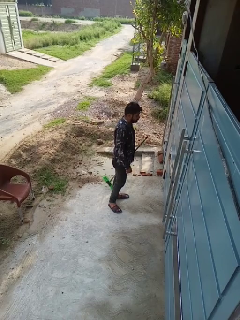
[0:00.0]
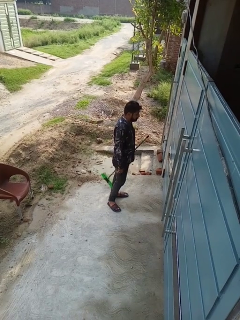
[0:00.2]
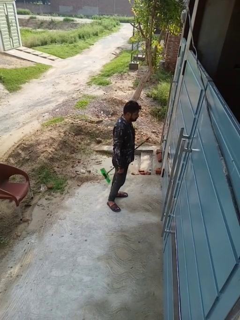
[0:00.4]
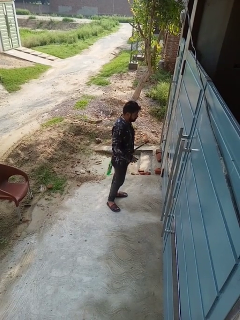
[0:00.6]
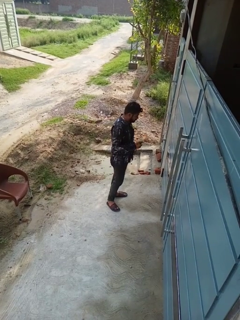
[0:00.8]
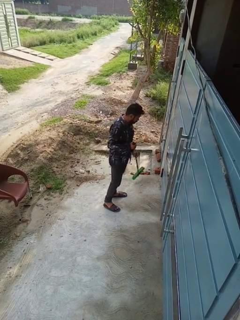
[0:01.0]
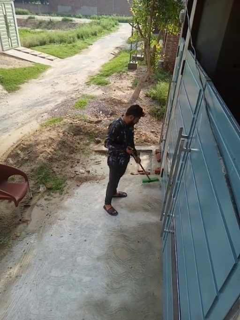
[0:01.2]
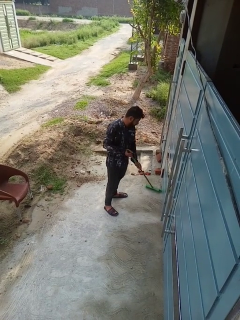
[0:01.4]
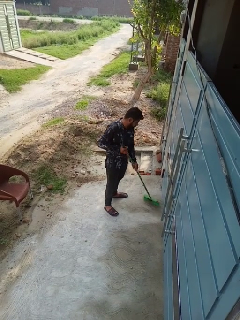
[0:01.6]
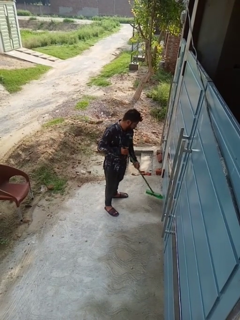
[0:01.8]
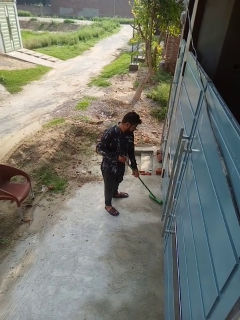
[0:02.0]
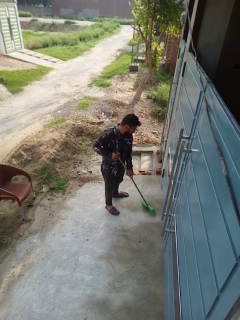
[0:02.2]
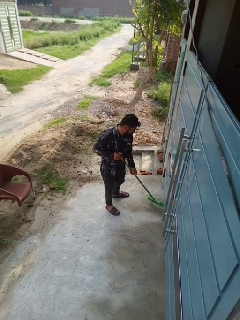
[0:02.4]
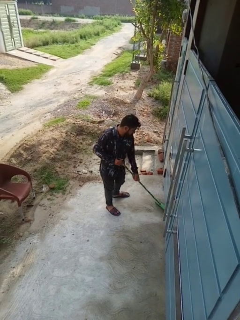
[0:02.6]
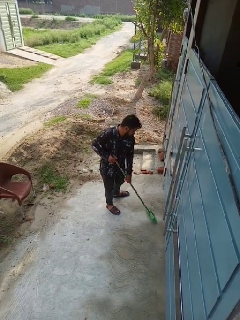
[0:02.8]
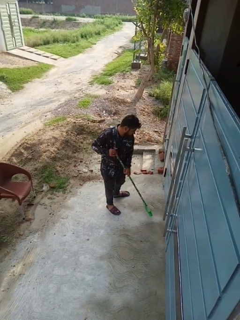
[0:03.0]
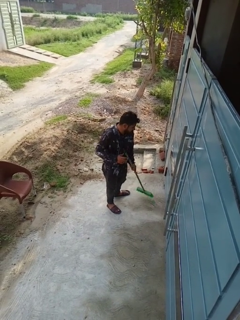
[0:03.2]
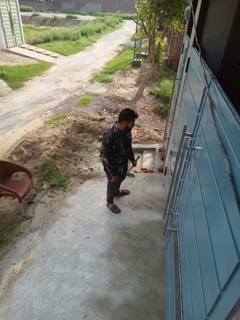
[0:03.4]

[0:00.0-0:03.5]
person sweeps floor

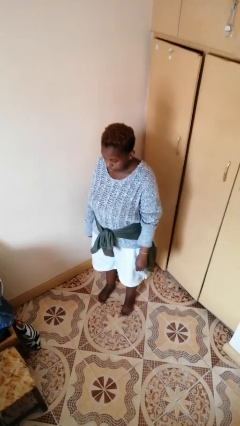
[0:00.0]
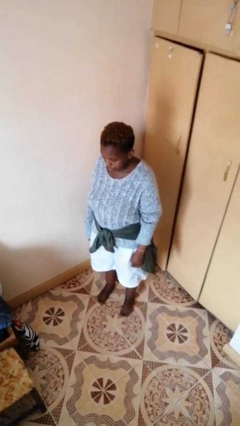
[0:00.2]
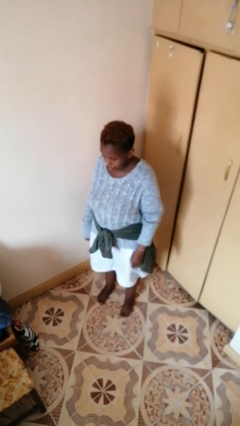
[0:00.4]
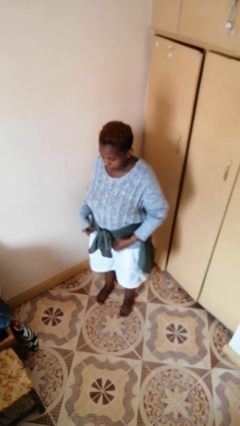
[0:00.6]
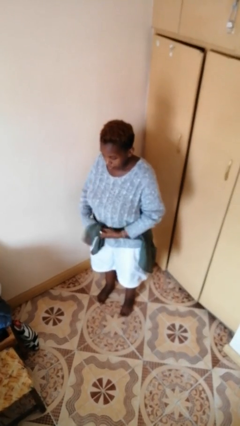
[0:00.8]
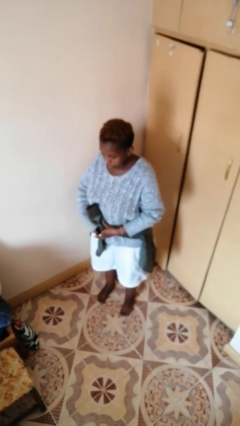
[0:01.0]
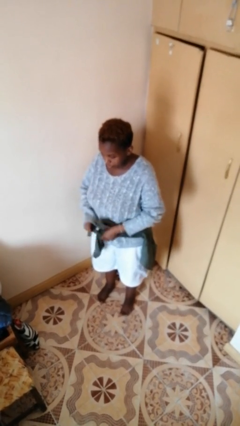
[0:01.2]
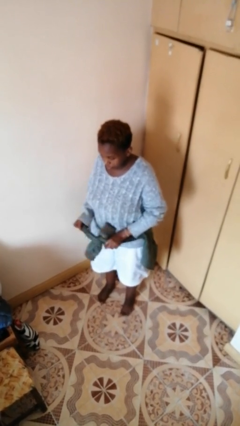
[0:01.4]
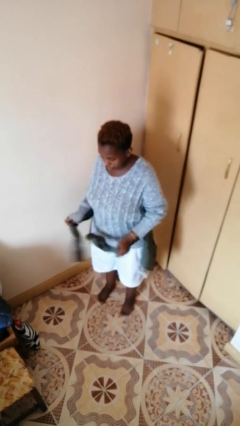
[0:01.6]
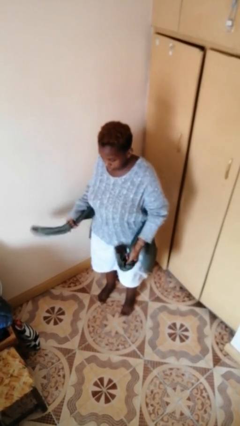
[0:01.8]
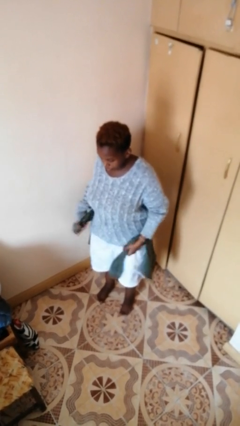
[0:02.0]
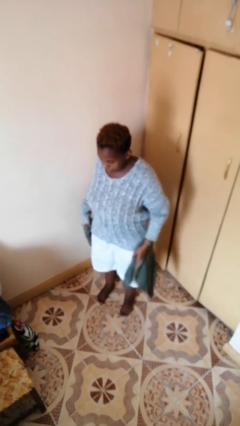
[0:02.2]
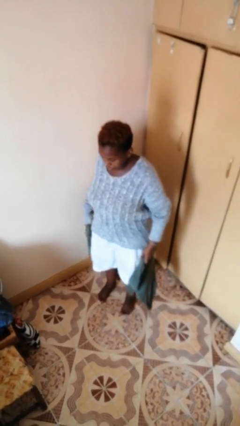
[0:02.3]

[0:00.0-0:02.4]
person unties jacket around waist

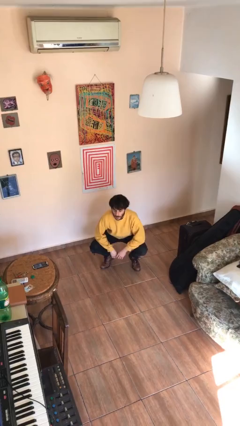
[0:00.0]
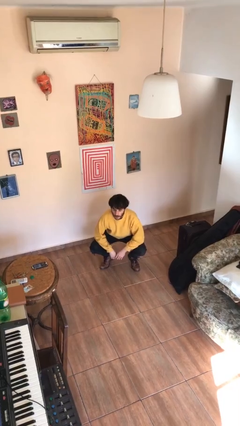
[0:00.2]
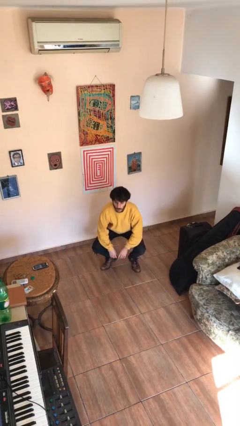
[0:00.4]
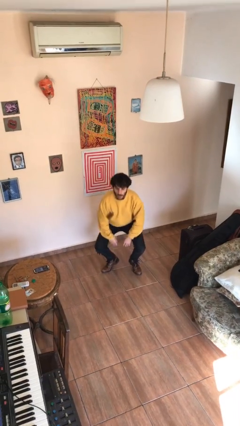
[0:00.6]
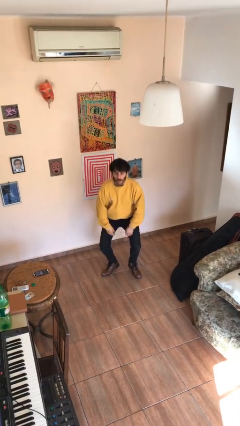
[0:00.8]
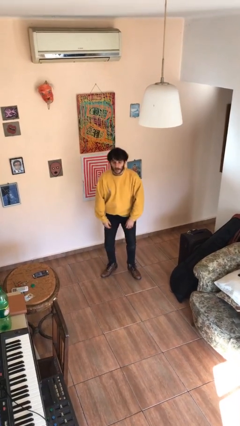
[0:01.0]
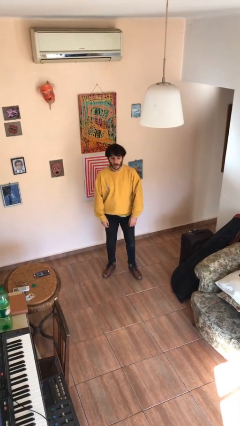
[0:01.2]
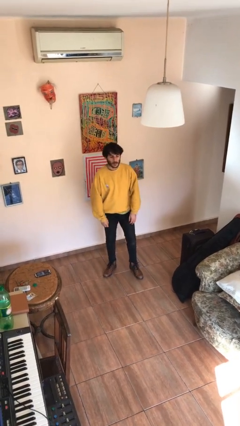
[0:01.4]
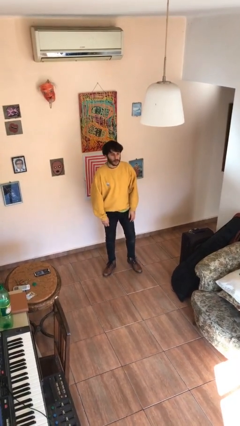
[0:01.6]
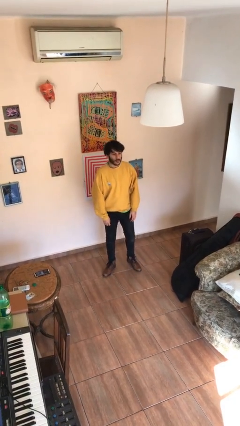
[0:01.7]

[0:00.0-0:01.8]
person stands up

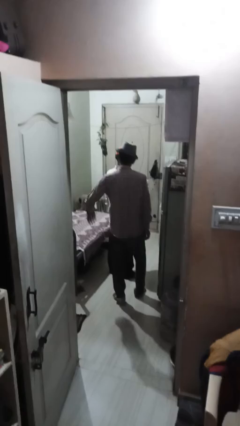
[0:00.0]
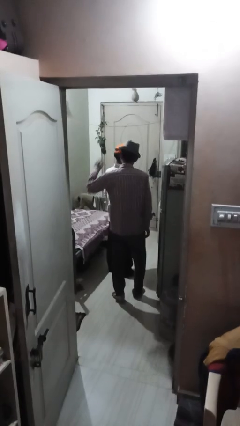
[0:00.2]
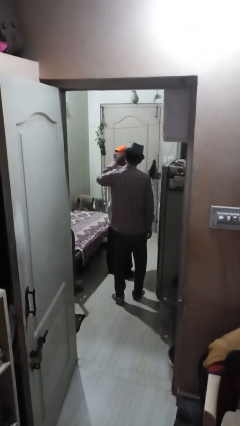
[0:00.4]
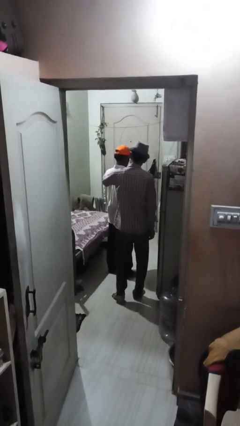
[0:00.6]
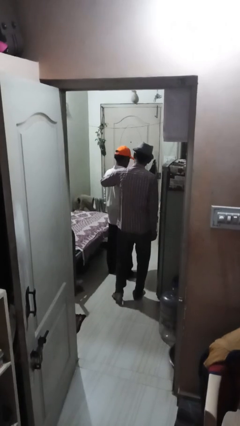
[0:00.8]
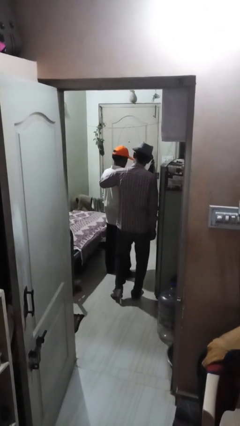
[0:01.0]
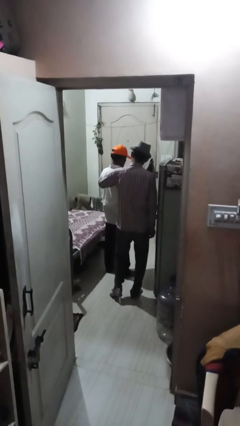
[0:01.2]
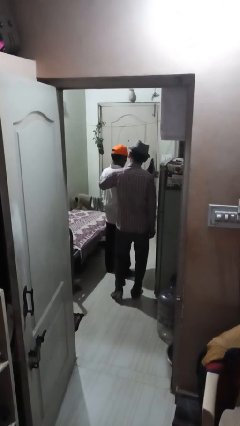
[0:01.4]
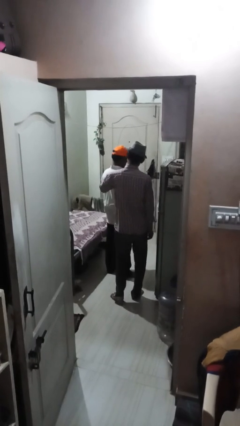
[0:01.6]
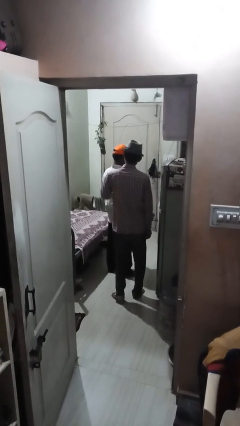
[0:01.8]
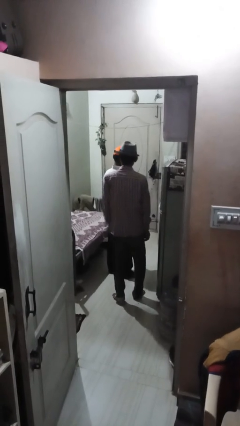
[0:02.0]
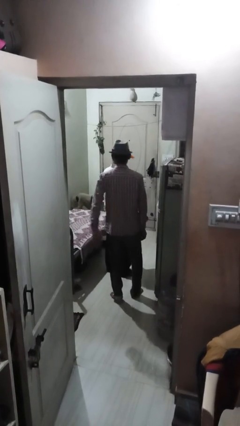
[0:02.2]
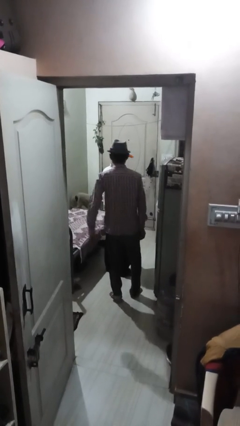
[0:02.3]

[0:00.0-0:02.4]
person touches back of person

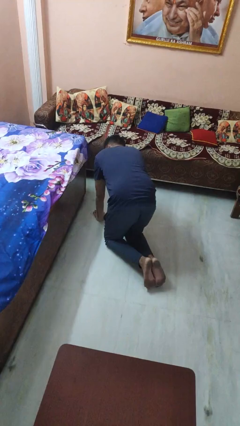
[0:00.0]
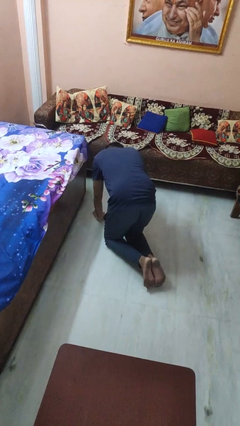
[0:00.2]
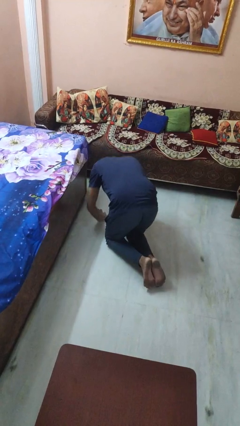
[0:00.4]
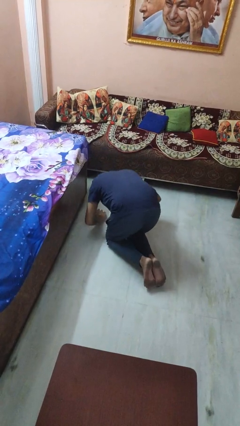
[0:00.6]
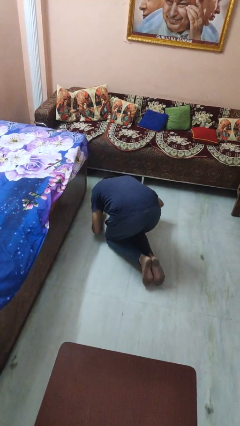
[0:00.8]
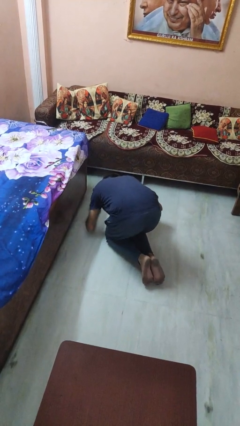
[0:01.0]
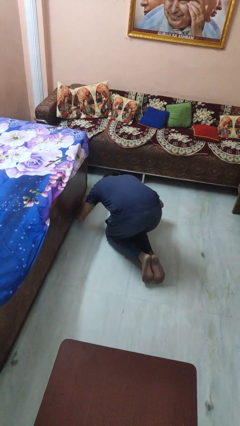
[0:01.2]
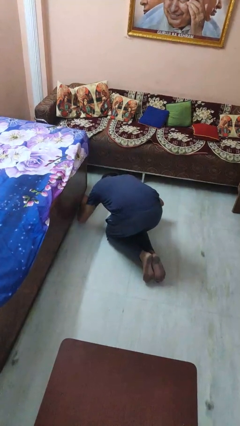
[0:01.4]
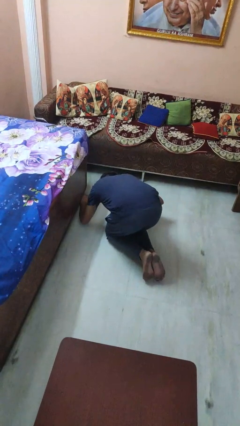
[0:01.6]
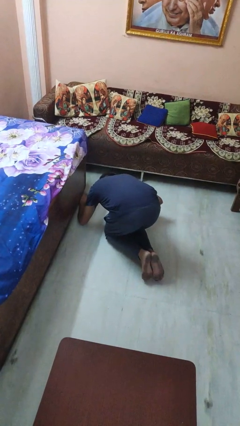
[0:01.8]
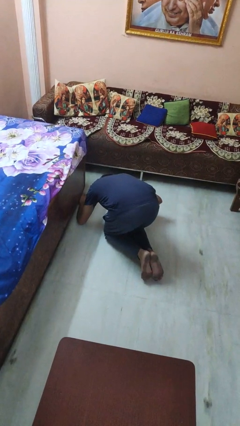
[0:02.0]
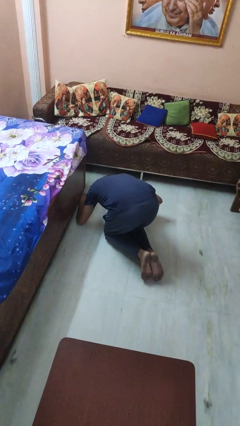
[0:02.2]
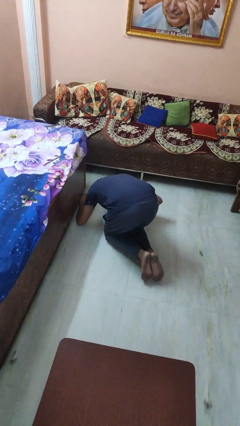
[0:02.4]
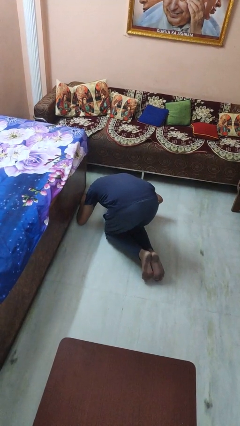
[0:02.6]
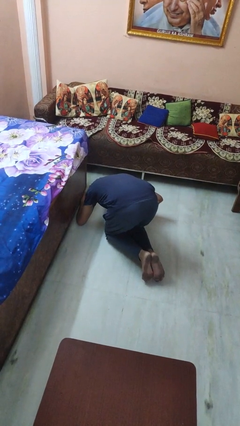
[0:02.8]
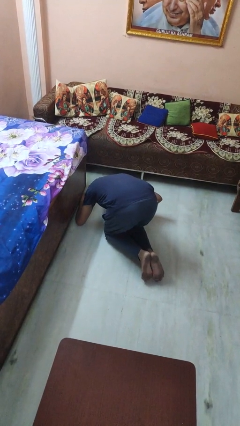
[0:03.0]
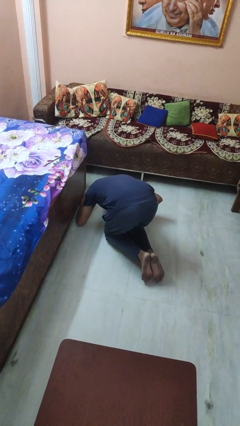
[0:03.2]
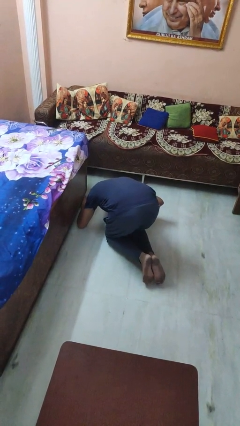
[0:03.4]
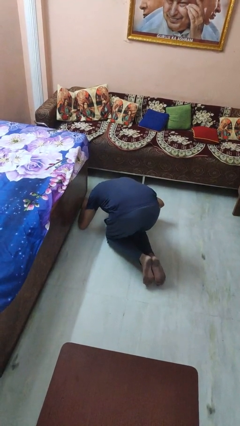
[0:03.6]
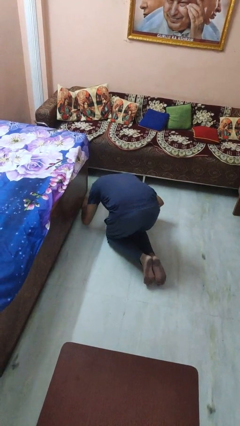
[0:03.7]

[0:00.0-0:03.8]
person searches under bed

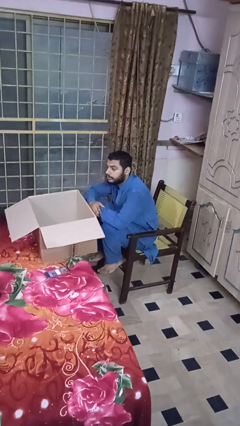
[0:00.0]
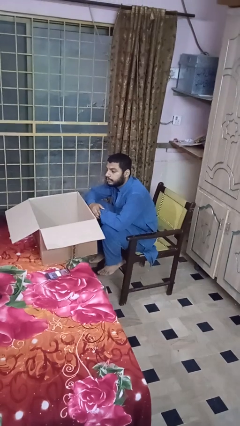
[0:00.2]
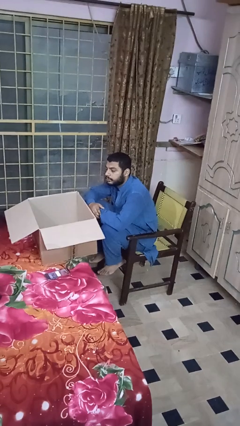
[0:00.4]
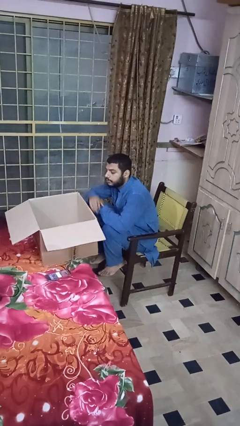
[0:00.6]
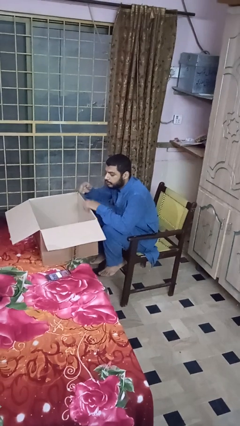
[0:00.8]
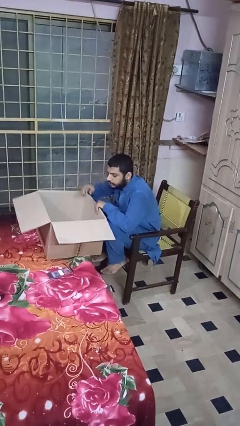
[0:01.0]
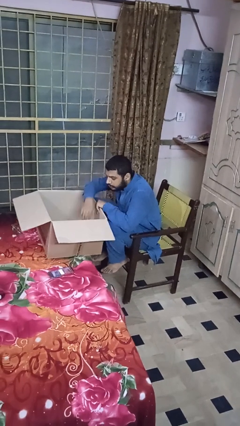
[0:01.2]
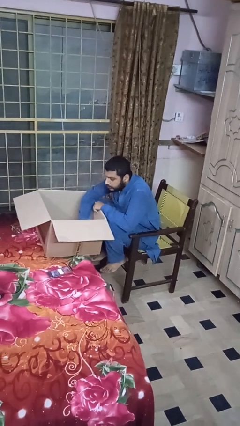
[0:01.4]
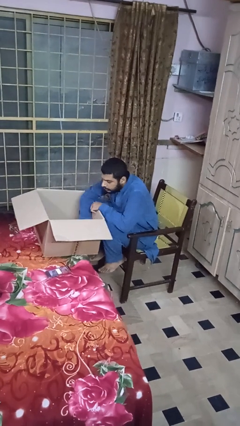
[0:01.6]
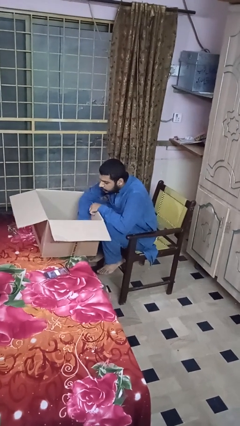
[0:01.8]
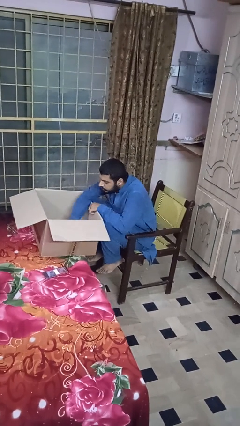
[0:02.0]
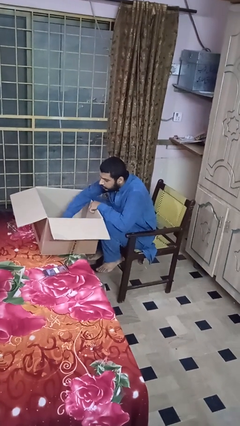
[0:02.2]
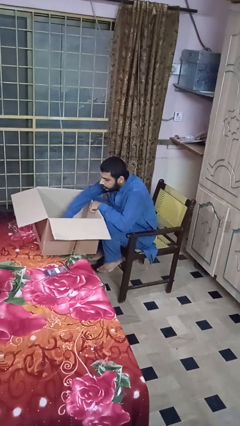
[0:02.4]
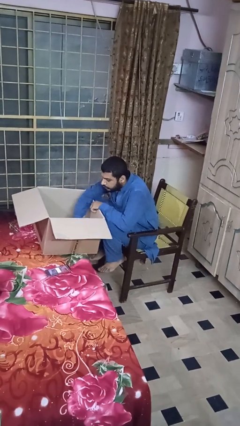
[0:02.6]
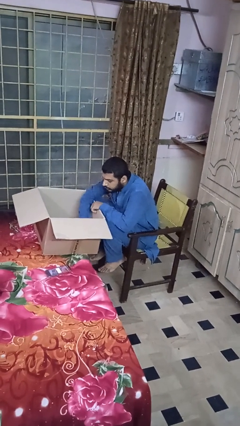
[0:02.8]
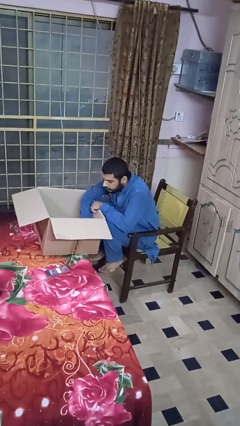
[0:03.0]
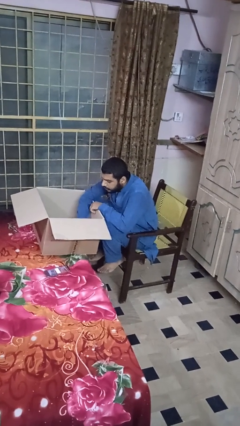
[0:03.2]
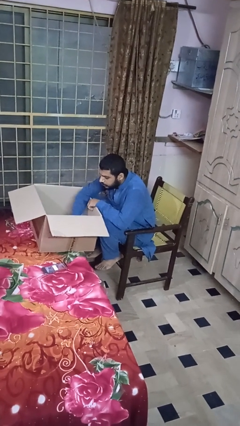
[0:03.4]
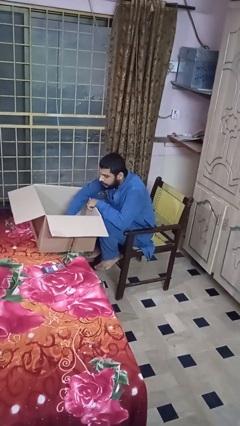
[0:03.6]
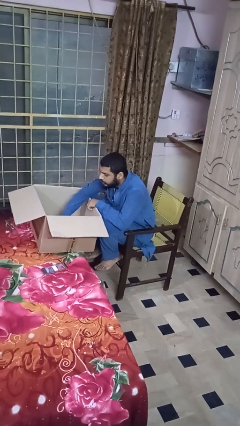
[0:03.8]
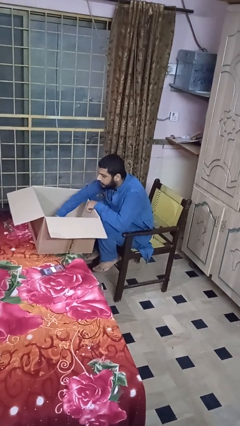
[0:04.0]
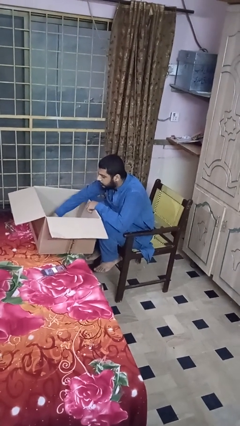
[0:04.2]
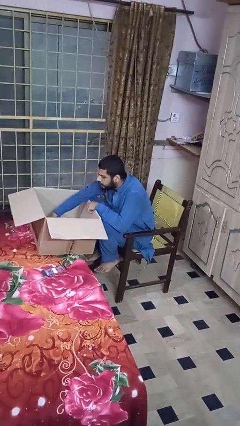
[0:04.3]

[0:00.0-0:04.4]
person searches in box
